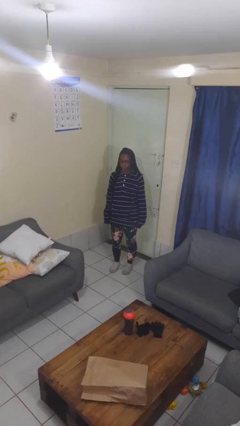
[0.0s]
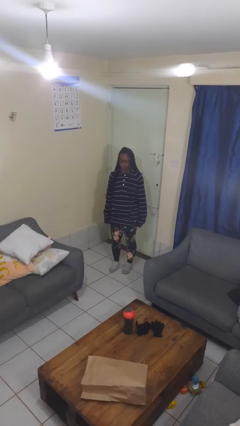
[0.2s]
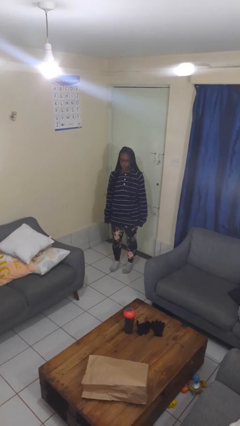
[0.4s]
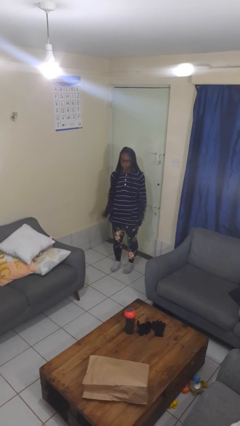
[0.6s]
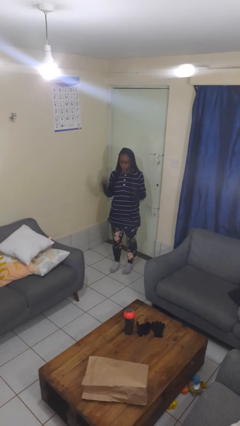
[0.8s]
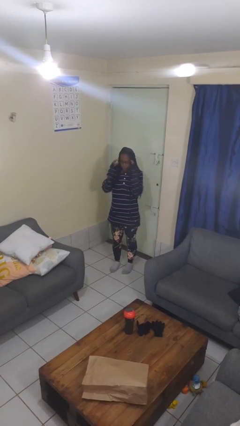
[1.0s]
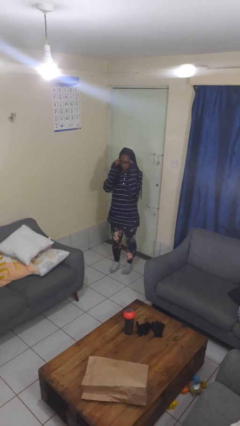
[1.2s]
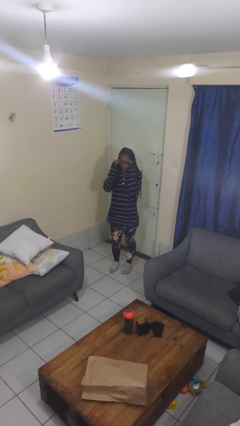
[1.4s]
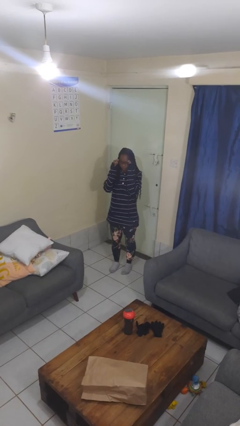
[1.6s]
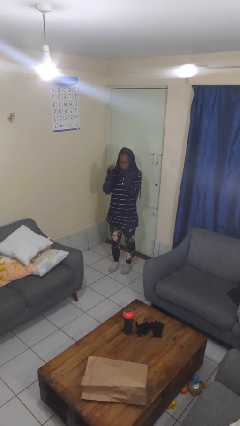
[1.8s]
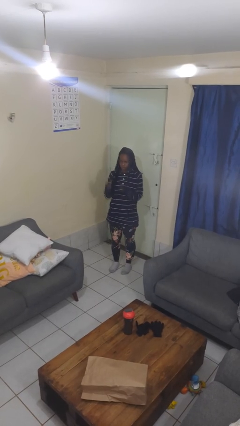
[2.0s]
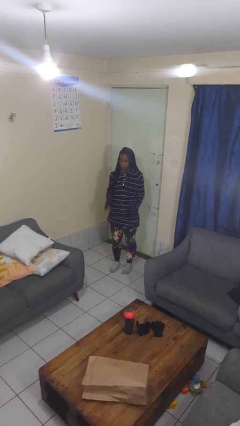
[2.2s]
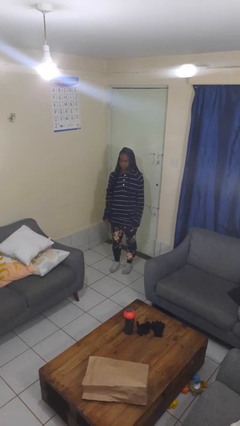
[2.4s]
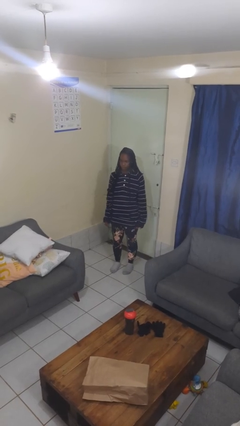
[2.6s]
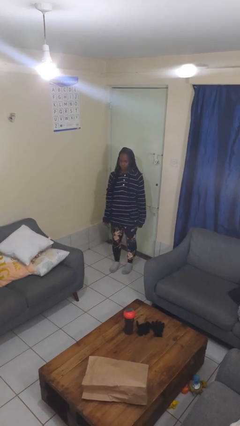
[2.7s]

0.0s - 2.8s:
person takes off glasses

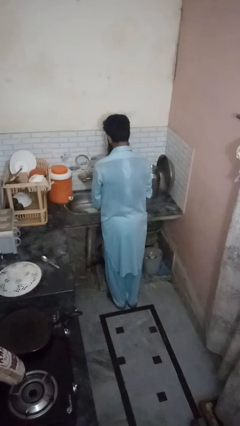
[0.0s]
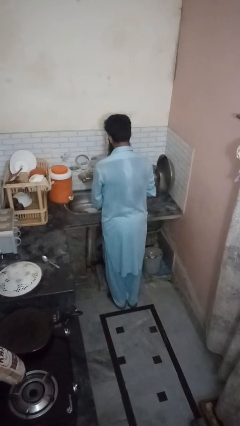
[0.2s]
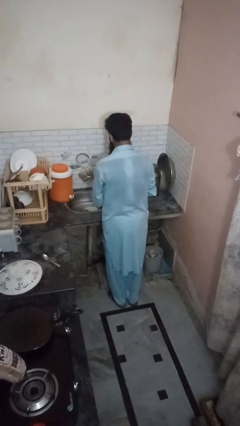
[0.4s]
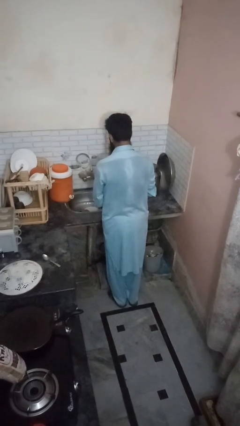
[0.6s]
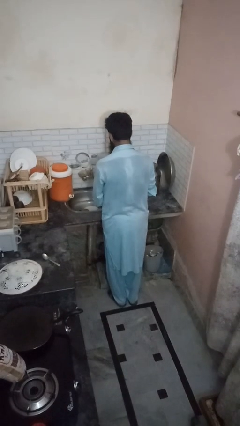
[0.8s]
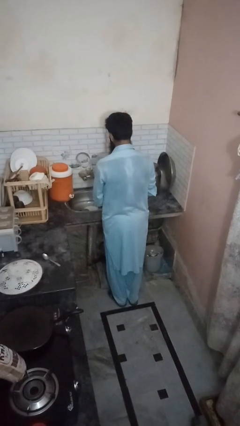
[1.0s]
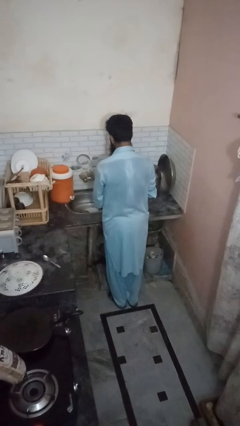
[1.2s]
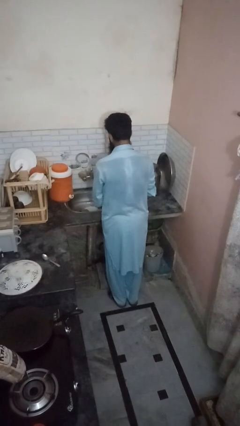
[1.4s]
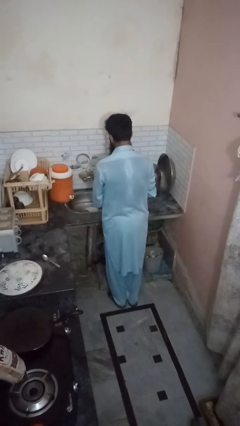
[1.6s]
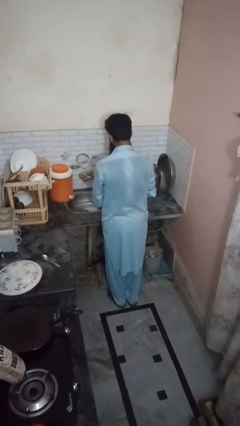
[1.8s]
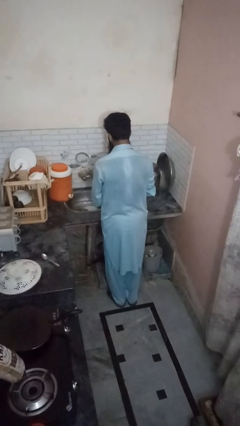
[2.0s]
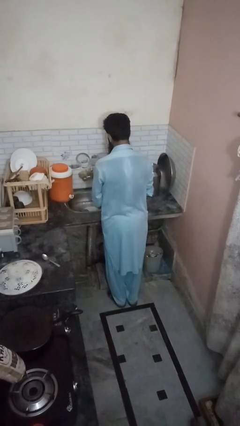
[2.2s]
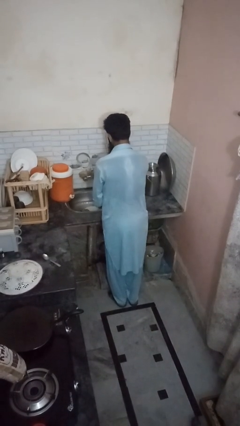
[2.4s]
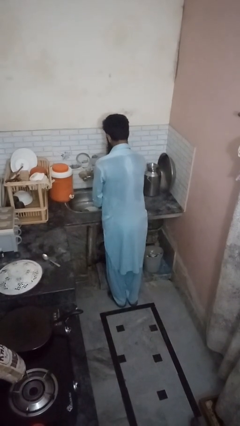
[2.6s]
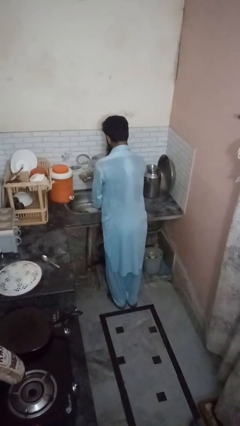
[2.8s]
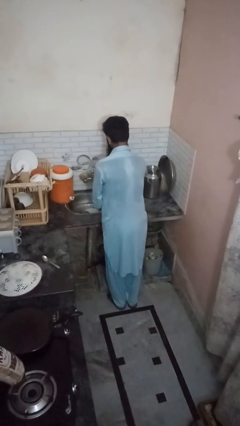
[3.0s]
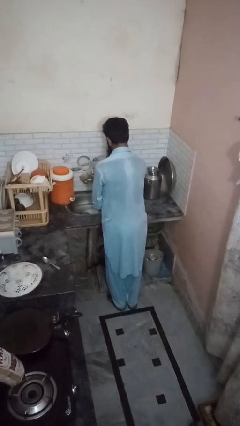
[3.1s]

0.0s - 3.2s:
person opens dishwasher

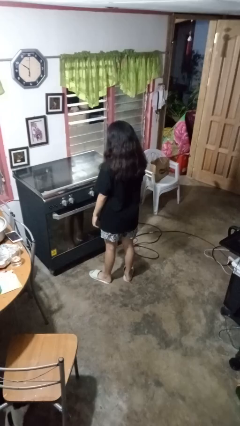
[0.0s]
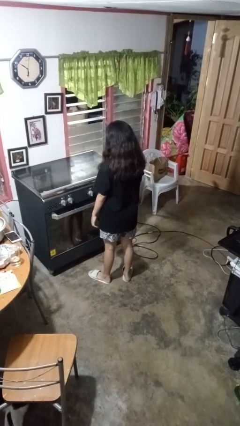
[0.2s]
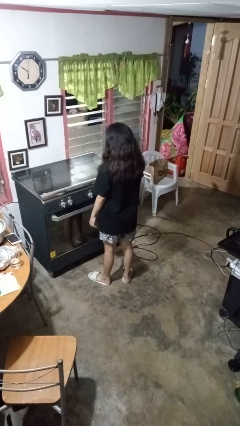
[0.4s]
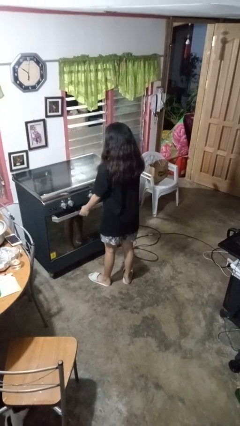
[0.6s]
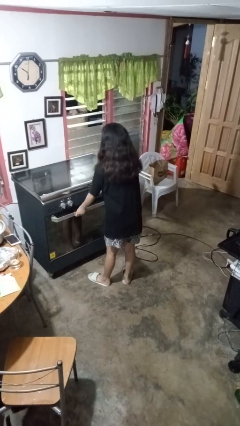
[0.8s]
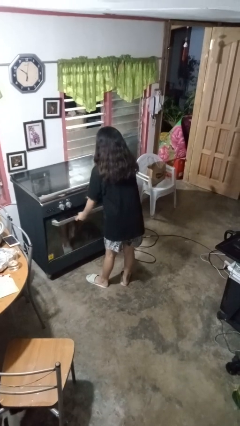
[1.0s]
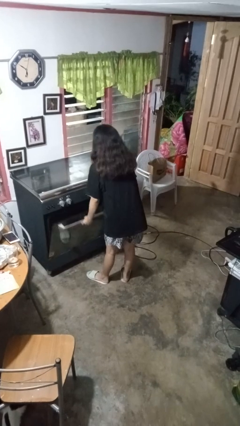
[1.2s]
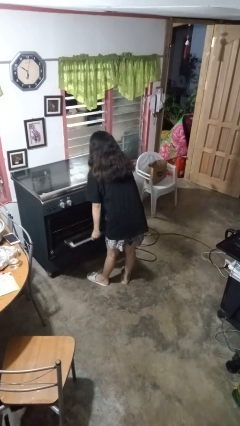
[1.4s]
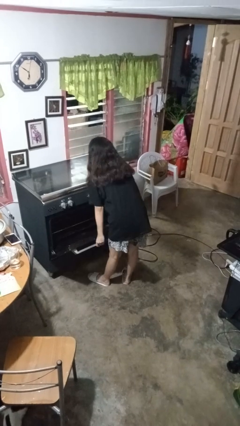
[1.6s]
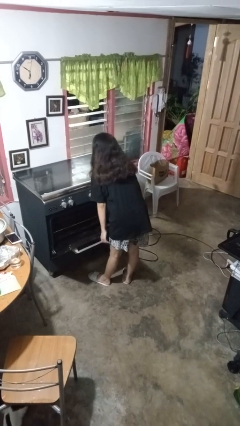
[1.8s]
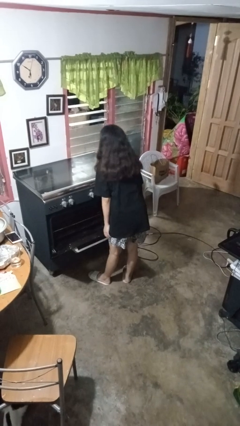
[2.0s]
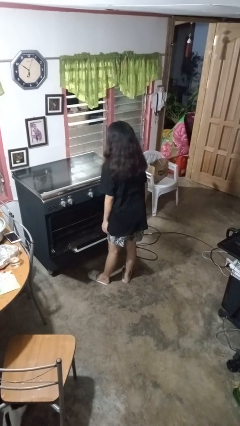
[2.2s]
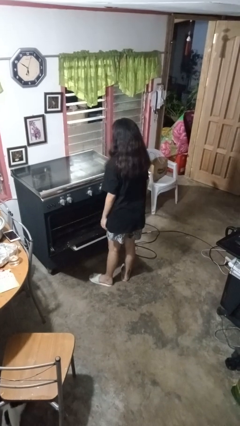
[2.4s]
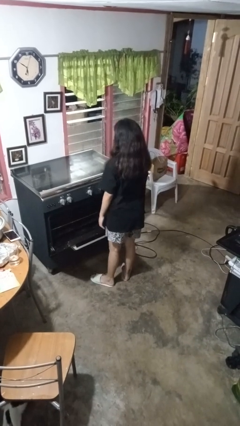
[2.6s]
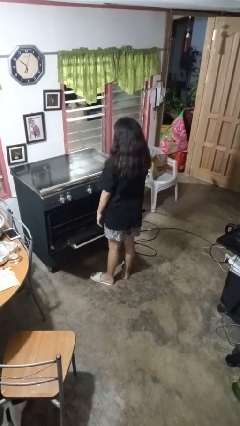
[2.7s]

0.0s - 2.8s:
person opens oven door

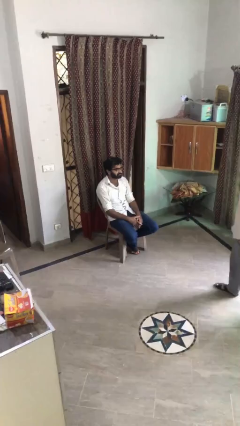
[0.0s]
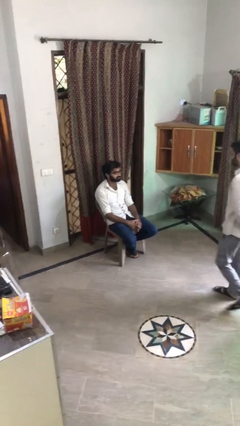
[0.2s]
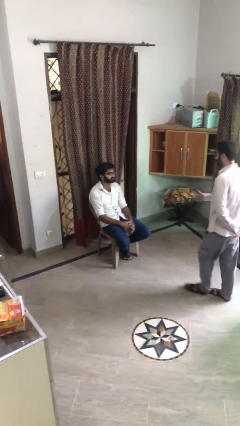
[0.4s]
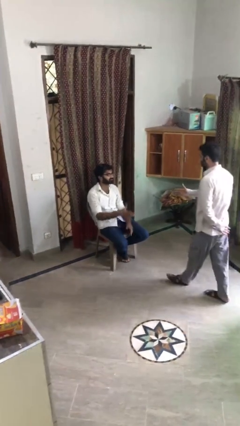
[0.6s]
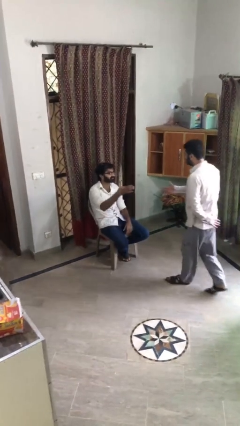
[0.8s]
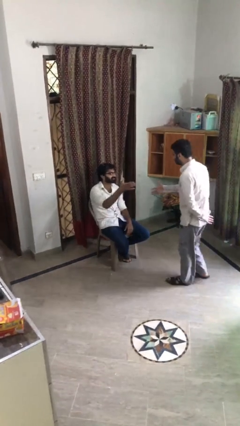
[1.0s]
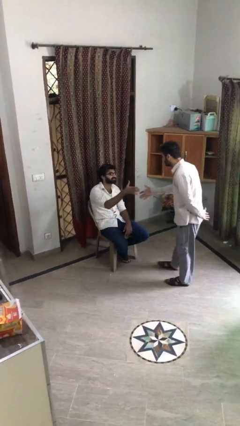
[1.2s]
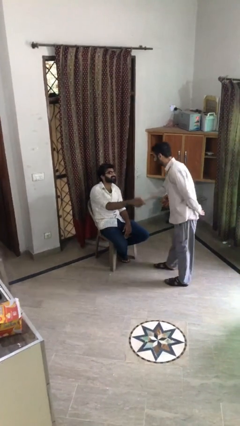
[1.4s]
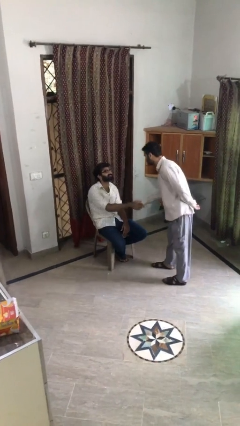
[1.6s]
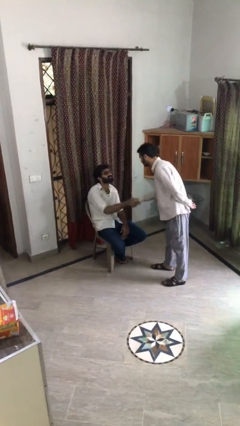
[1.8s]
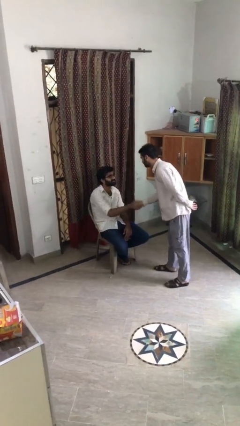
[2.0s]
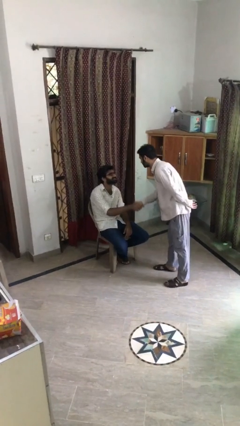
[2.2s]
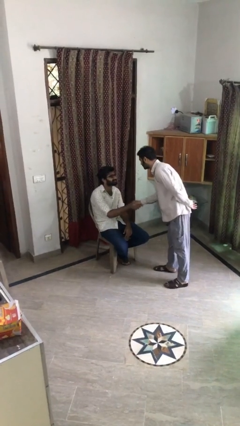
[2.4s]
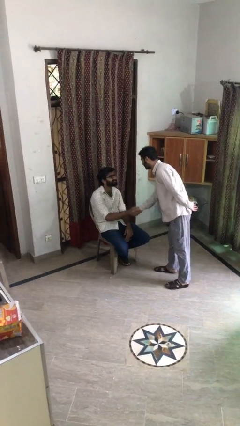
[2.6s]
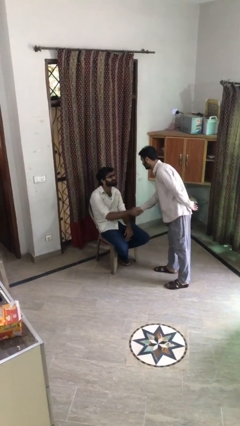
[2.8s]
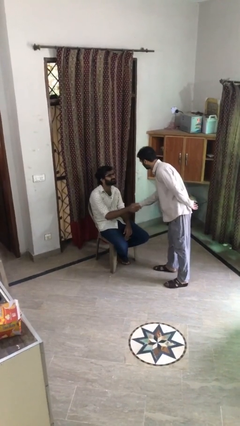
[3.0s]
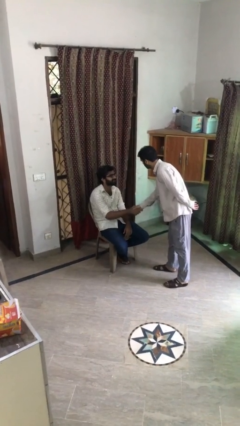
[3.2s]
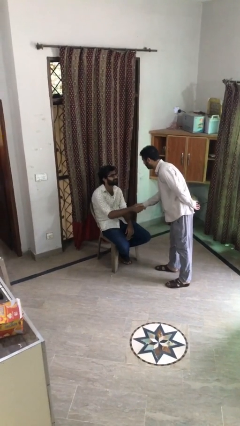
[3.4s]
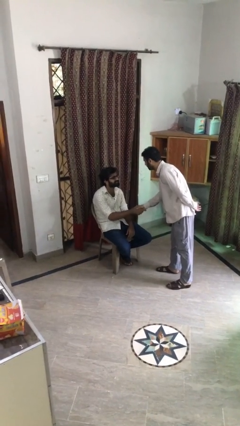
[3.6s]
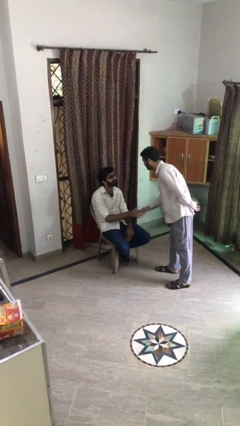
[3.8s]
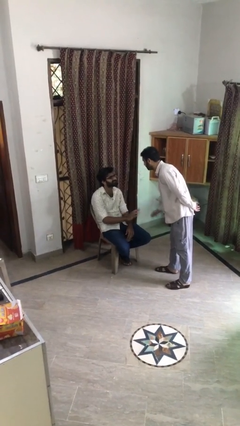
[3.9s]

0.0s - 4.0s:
person shakes hand

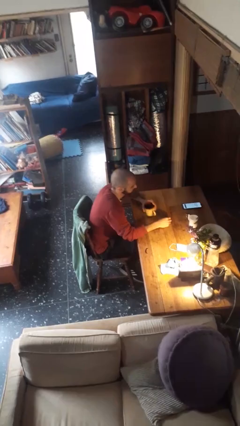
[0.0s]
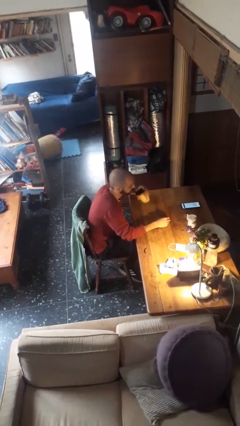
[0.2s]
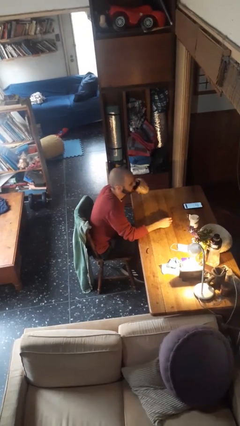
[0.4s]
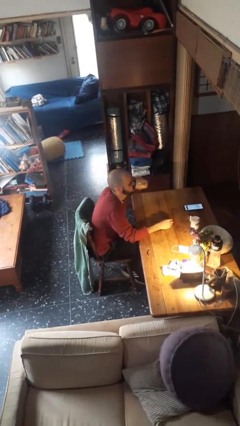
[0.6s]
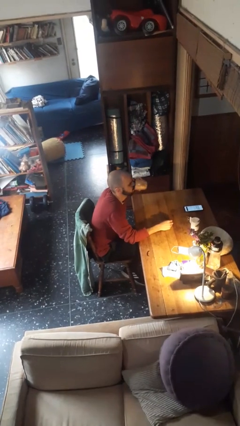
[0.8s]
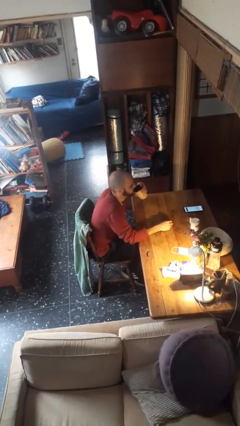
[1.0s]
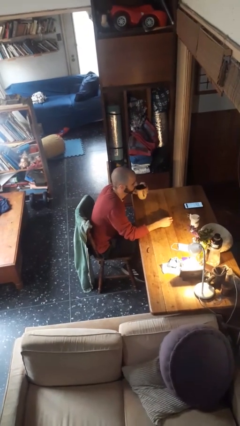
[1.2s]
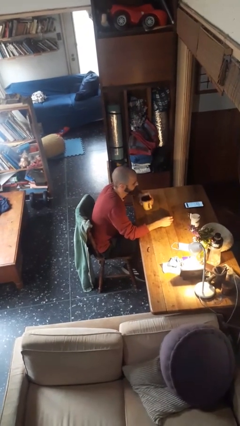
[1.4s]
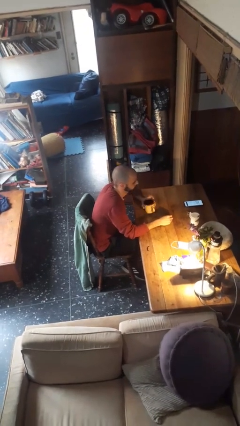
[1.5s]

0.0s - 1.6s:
person drinks from mug

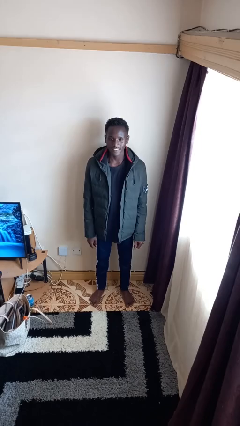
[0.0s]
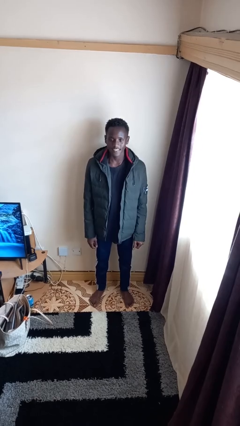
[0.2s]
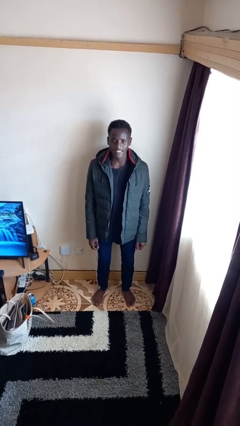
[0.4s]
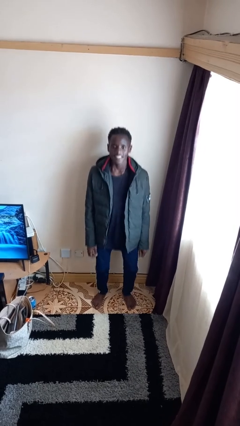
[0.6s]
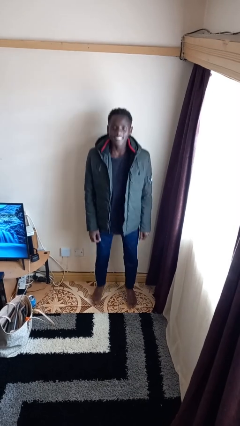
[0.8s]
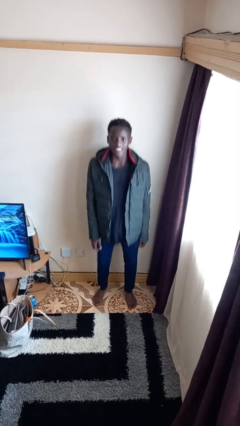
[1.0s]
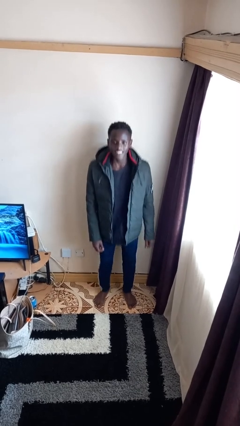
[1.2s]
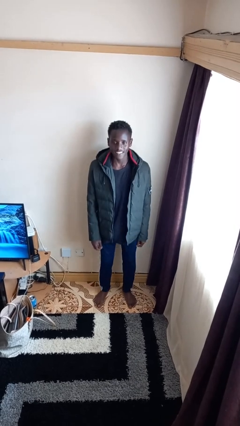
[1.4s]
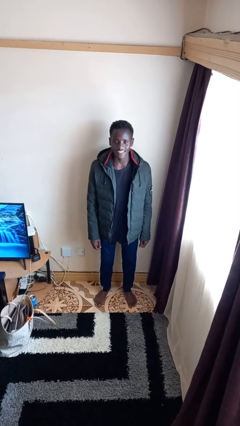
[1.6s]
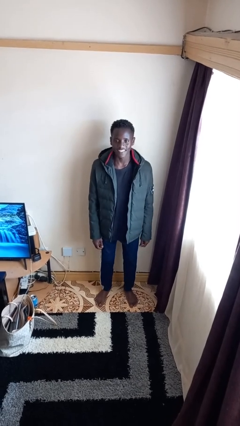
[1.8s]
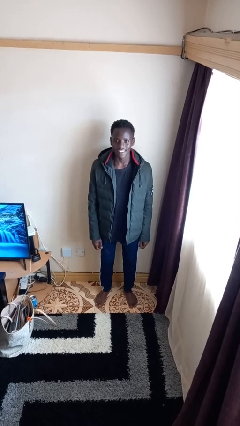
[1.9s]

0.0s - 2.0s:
person jumps

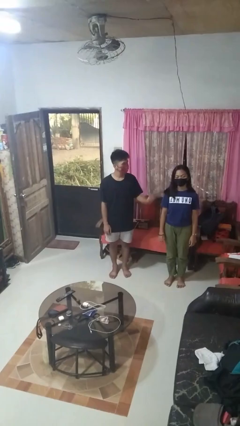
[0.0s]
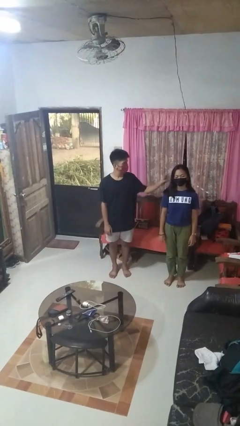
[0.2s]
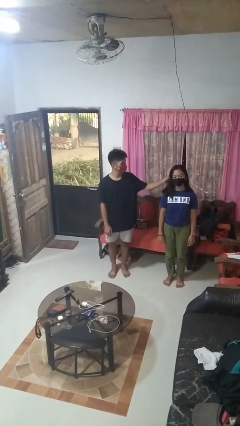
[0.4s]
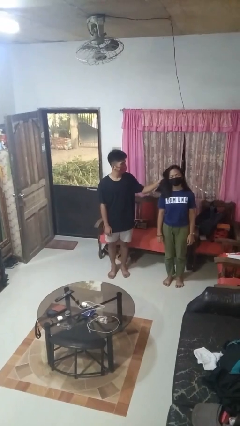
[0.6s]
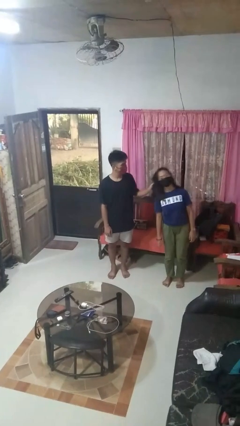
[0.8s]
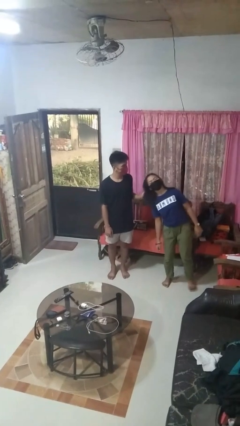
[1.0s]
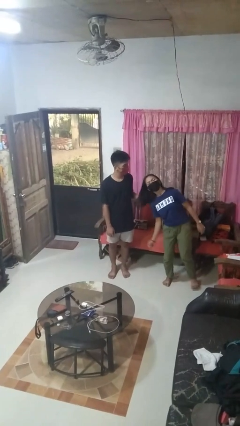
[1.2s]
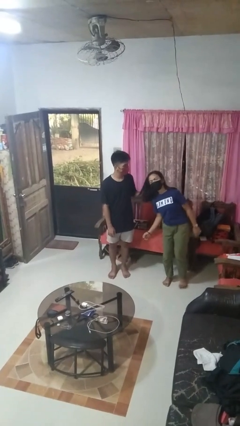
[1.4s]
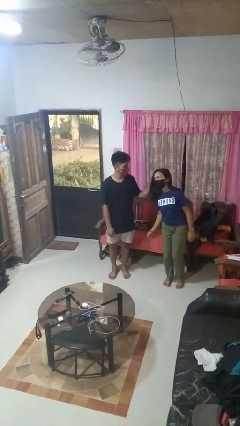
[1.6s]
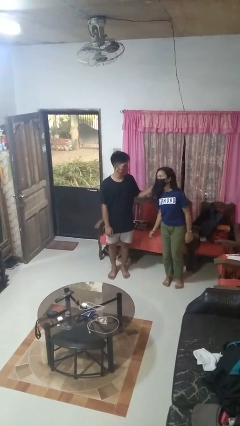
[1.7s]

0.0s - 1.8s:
person grabs person by hair
